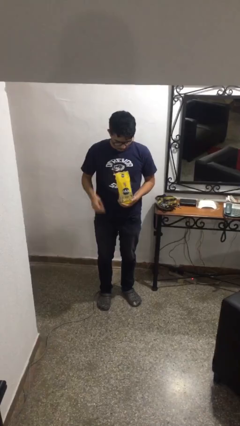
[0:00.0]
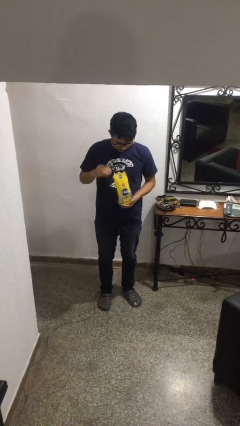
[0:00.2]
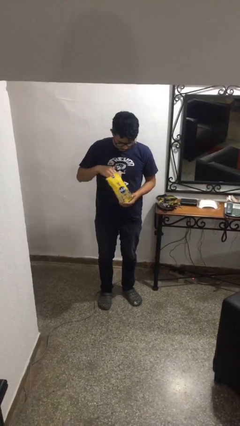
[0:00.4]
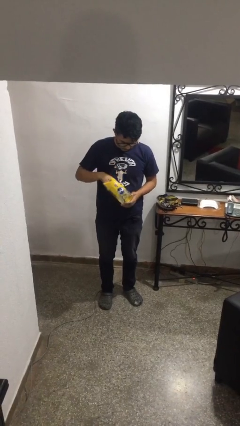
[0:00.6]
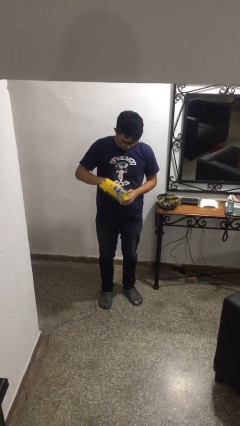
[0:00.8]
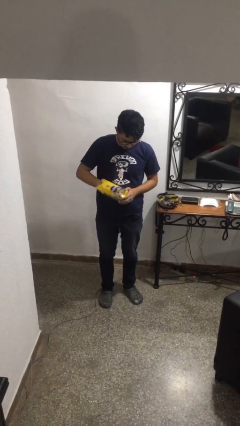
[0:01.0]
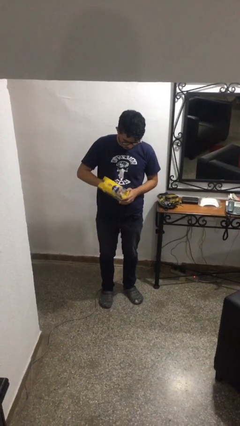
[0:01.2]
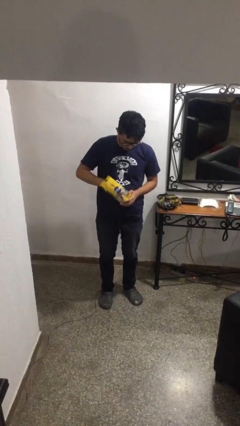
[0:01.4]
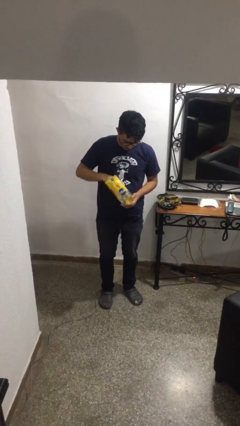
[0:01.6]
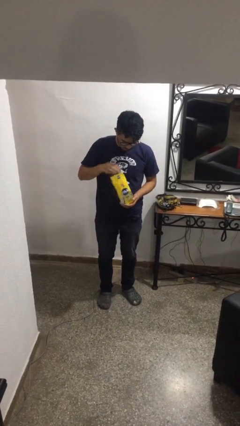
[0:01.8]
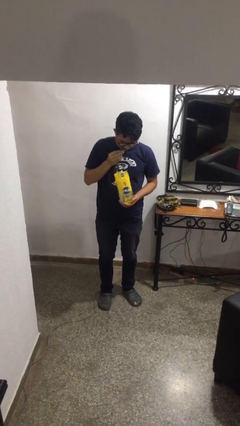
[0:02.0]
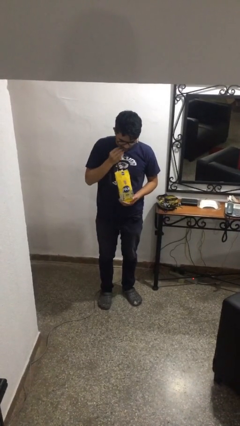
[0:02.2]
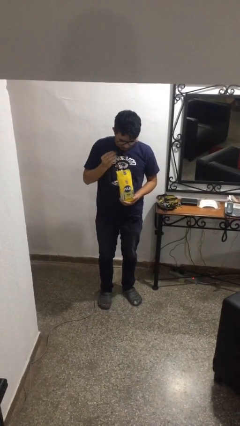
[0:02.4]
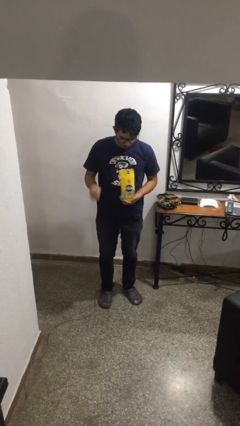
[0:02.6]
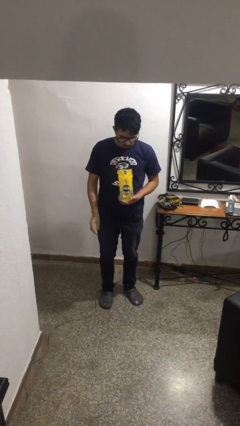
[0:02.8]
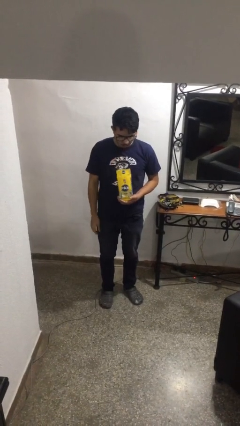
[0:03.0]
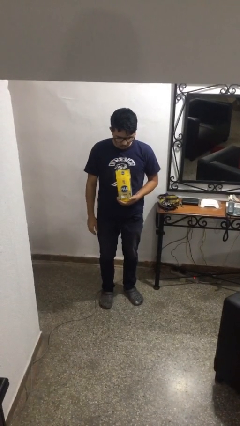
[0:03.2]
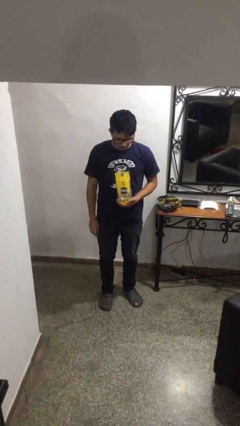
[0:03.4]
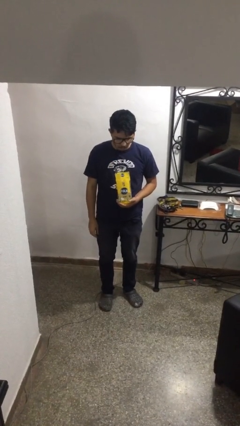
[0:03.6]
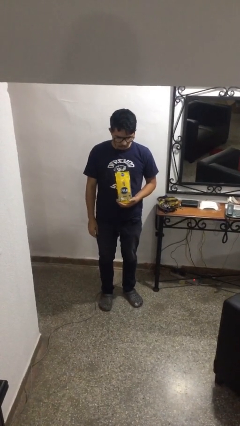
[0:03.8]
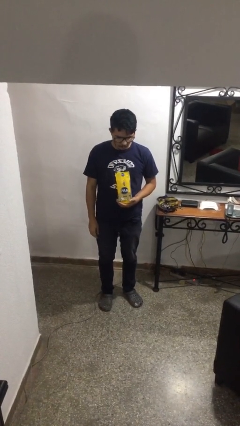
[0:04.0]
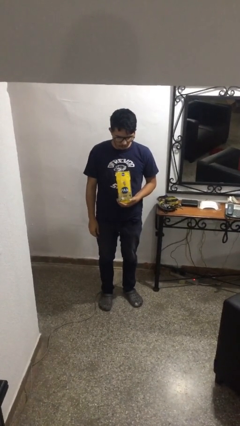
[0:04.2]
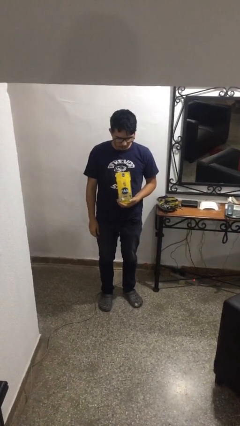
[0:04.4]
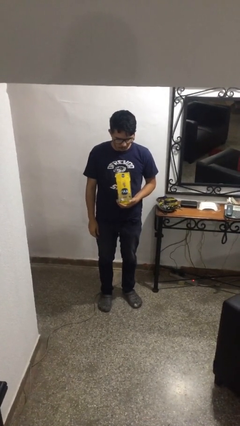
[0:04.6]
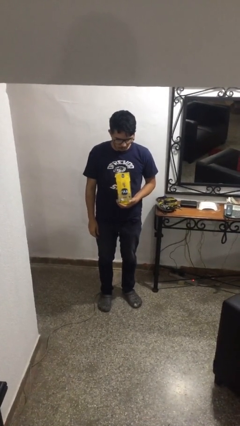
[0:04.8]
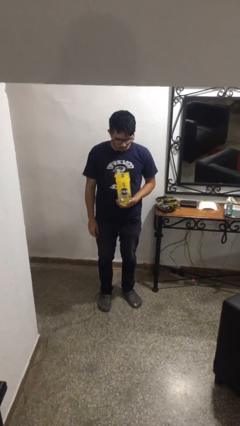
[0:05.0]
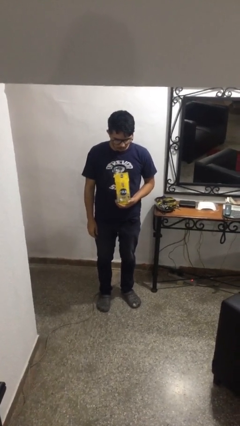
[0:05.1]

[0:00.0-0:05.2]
person eats snack from bag

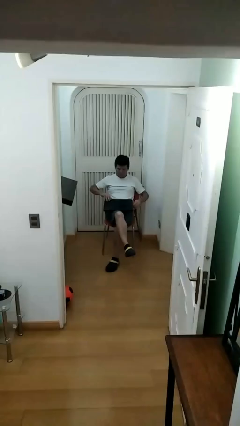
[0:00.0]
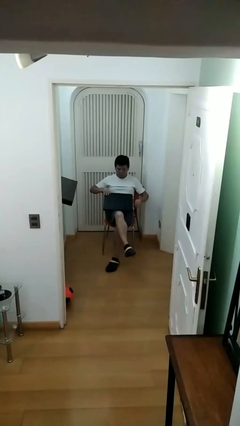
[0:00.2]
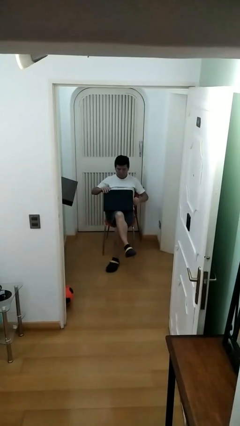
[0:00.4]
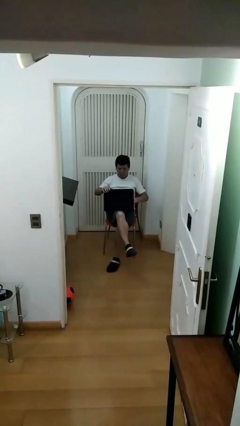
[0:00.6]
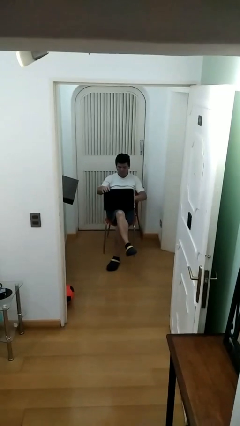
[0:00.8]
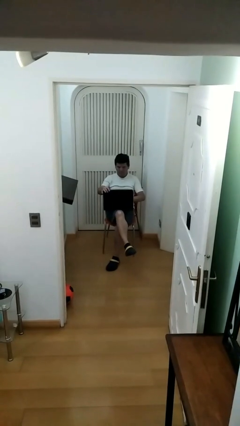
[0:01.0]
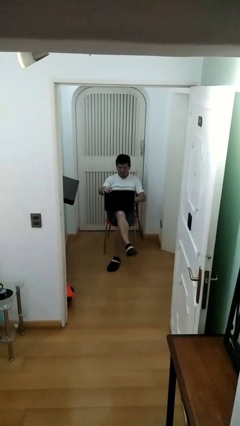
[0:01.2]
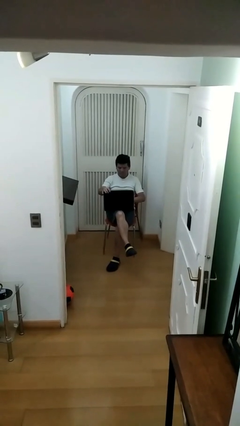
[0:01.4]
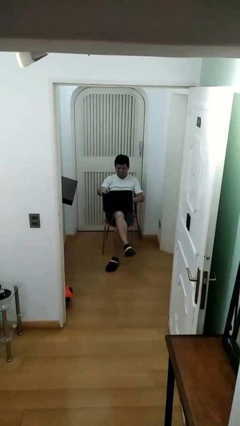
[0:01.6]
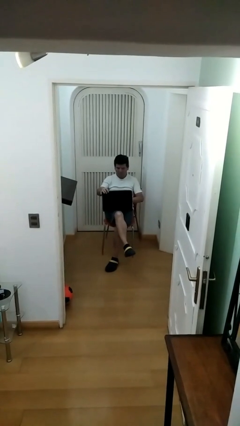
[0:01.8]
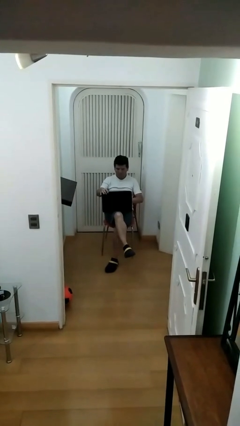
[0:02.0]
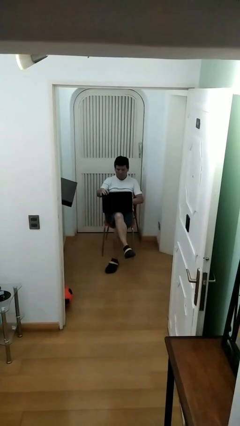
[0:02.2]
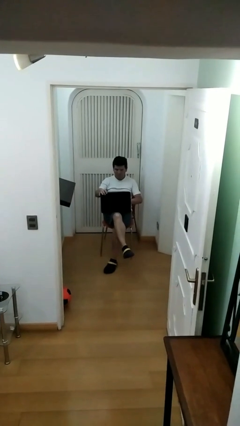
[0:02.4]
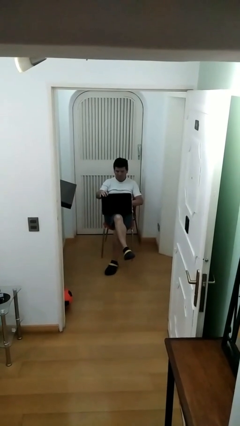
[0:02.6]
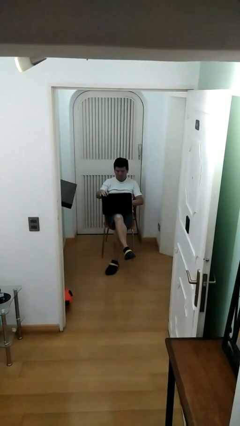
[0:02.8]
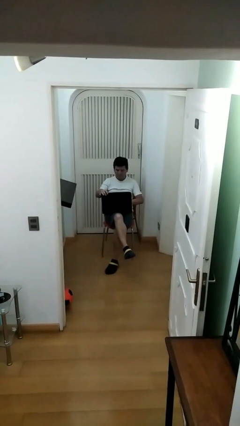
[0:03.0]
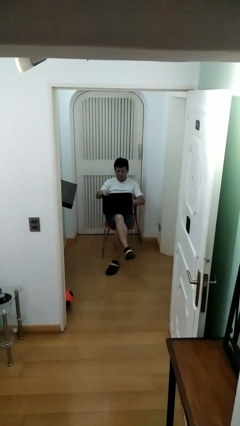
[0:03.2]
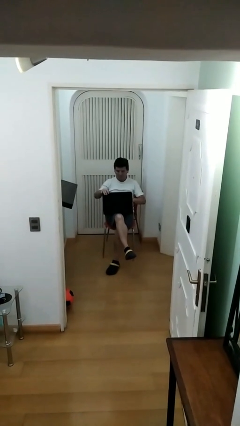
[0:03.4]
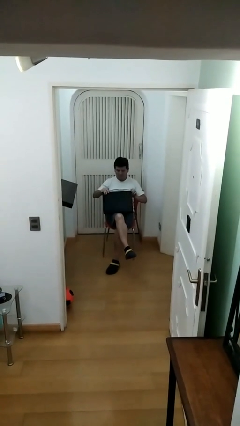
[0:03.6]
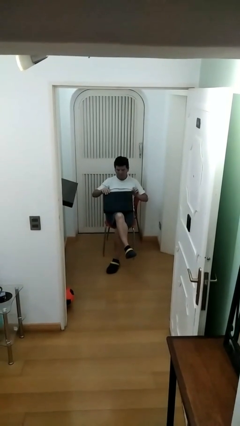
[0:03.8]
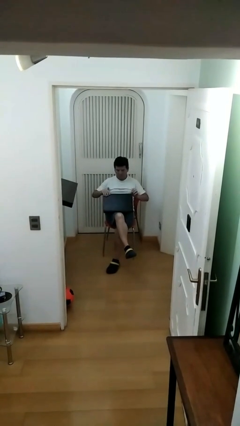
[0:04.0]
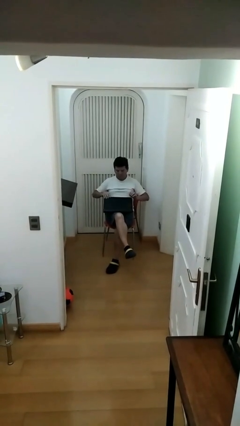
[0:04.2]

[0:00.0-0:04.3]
person interacts with laptop

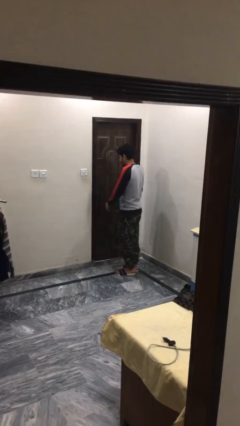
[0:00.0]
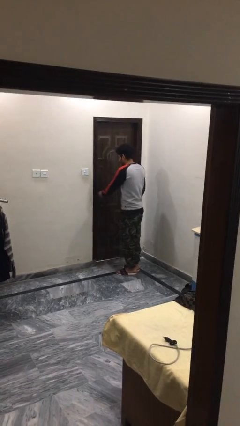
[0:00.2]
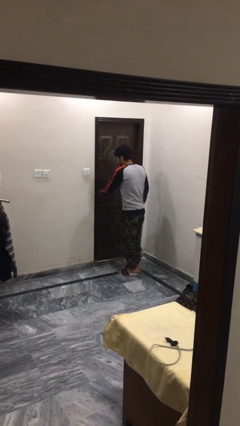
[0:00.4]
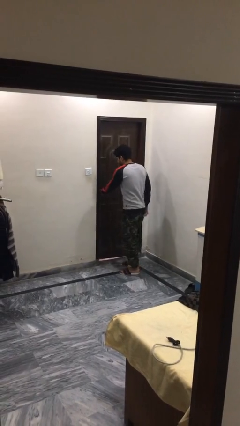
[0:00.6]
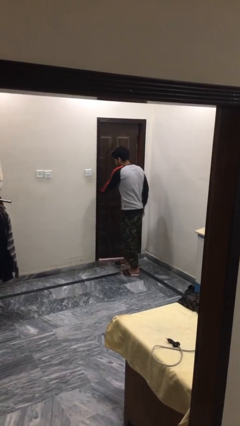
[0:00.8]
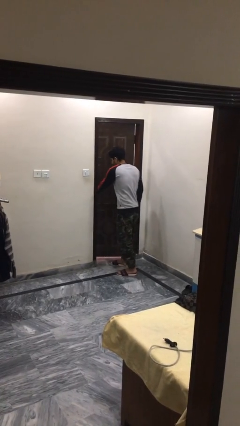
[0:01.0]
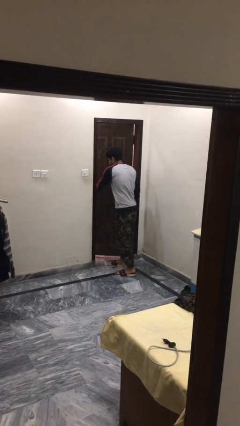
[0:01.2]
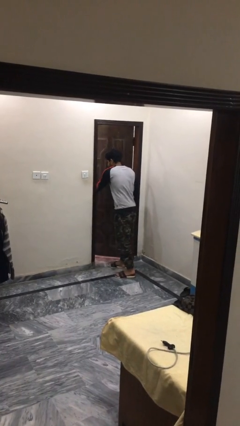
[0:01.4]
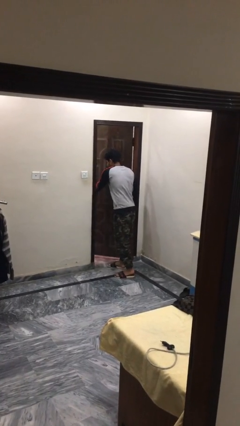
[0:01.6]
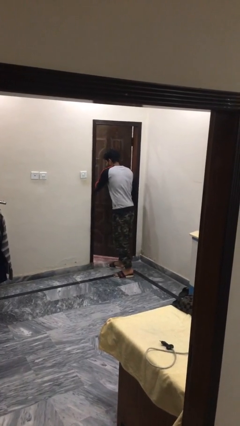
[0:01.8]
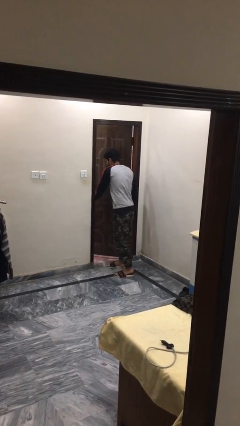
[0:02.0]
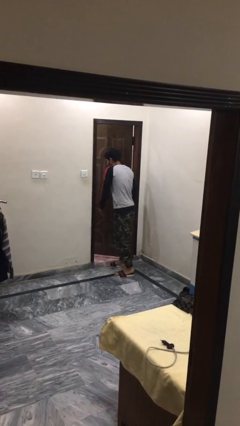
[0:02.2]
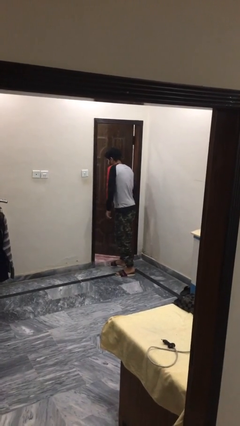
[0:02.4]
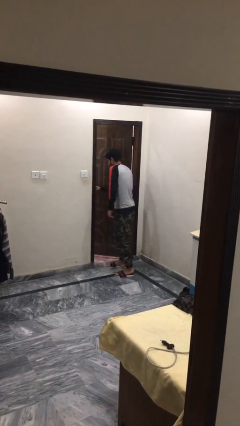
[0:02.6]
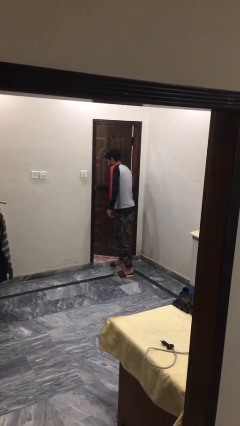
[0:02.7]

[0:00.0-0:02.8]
person opens facility door

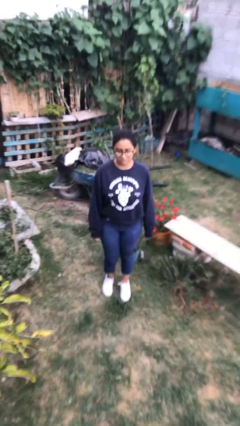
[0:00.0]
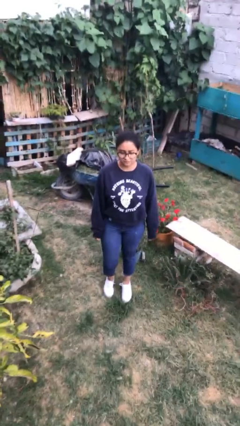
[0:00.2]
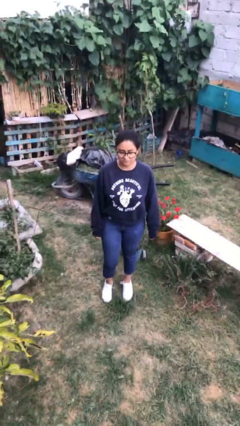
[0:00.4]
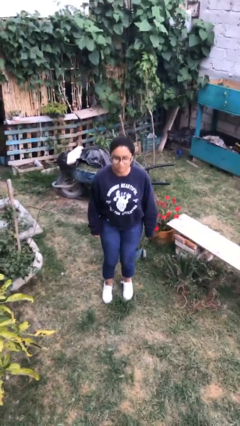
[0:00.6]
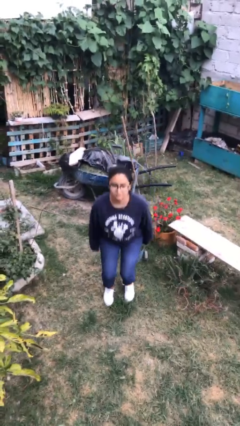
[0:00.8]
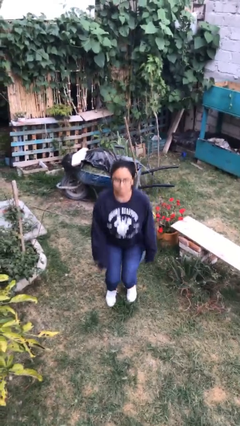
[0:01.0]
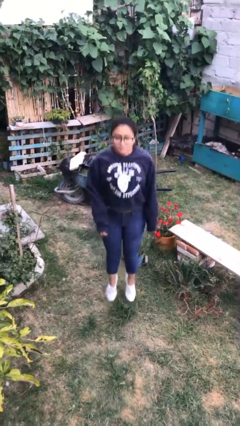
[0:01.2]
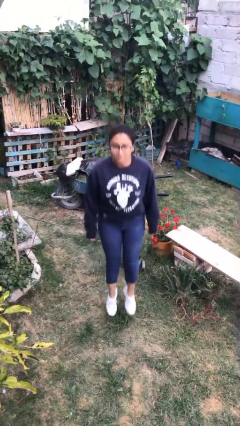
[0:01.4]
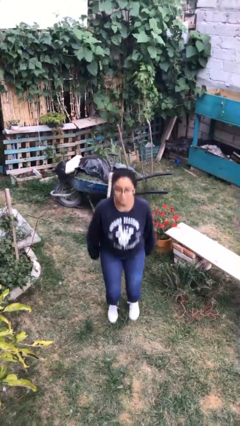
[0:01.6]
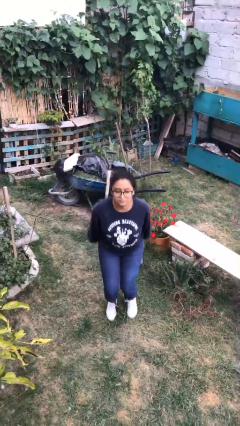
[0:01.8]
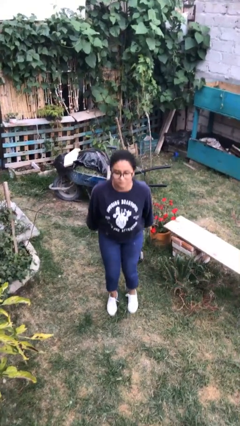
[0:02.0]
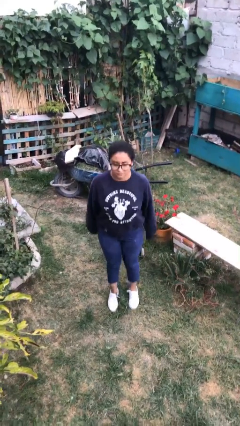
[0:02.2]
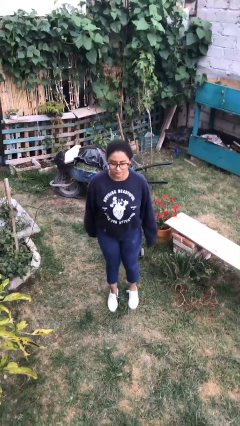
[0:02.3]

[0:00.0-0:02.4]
person jumps

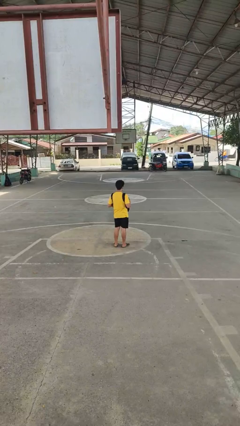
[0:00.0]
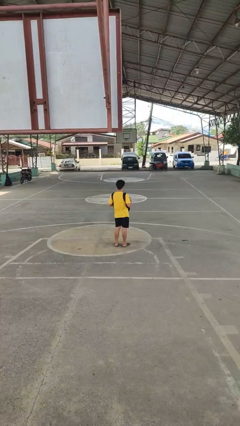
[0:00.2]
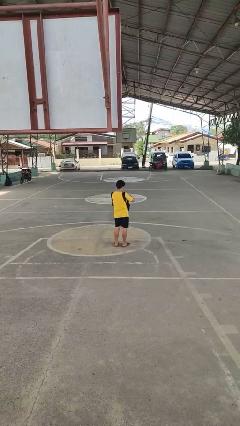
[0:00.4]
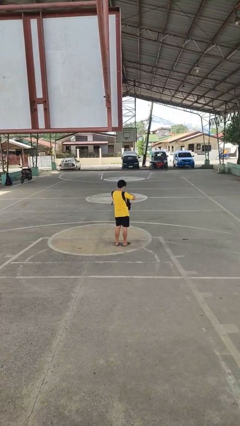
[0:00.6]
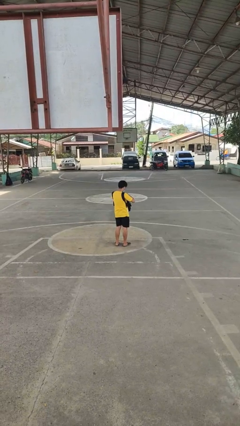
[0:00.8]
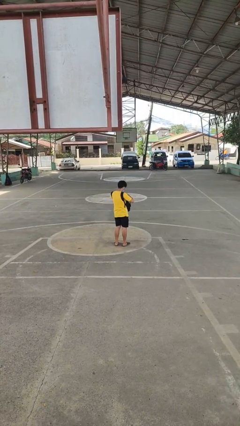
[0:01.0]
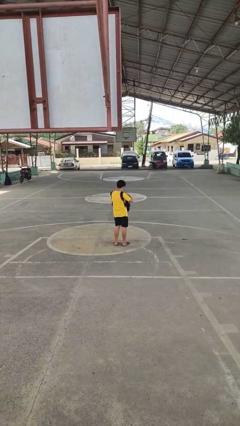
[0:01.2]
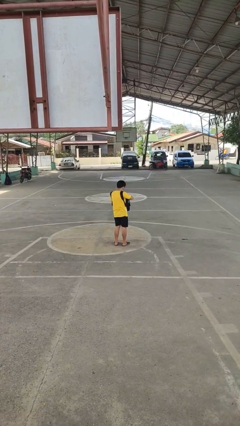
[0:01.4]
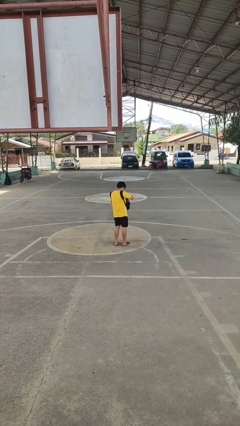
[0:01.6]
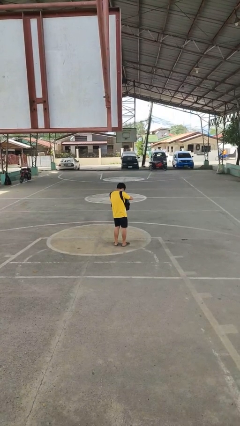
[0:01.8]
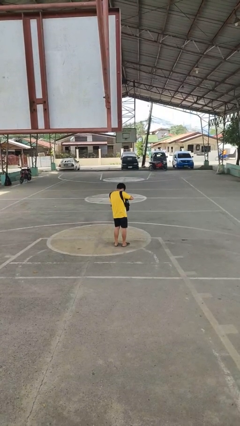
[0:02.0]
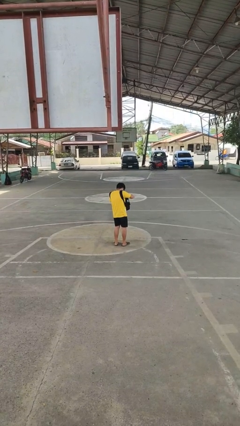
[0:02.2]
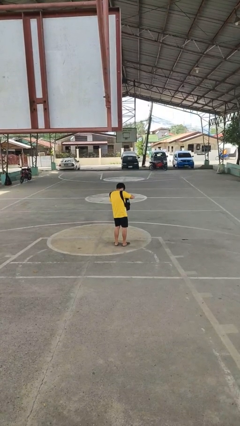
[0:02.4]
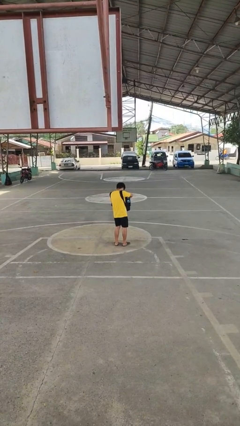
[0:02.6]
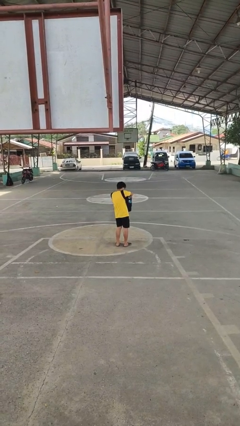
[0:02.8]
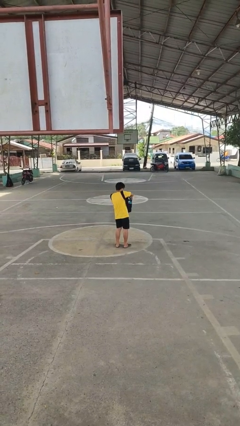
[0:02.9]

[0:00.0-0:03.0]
person searches in backpack
